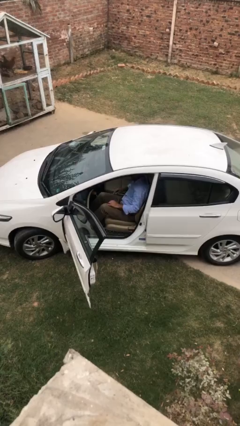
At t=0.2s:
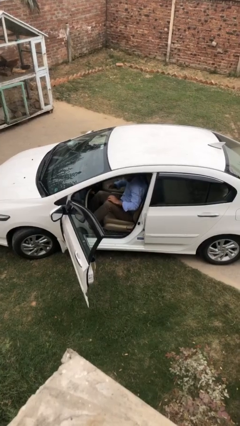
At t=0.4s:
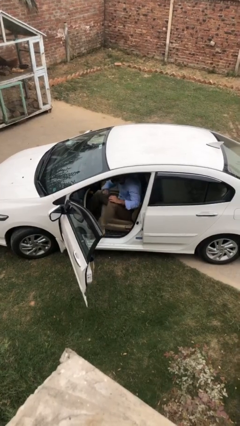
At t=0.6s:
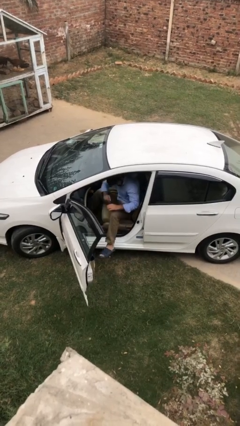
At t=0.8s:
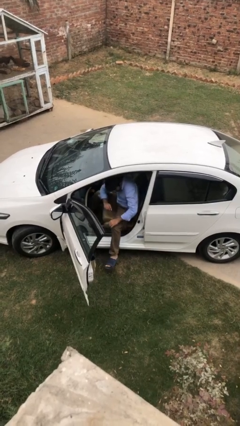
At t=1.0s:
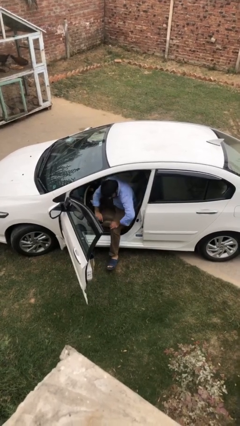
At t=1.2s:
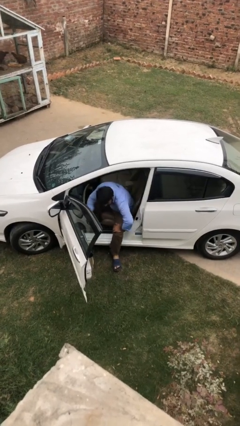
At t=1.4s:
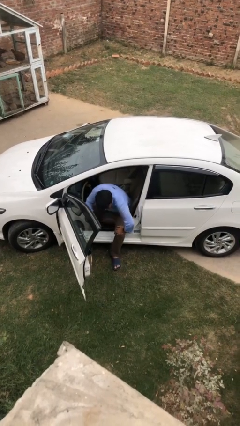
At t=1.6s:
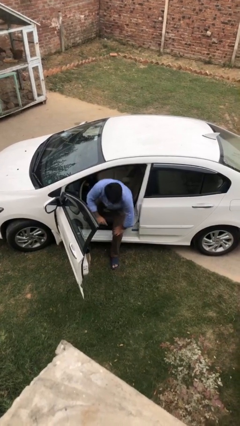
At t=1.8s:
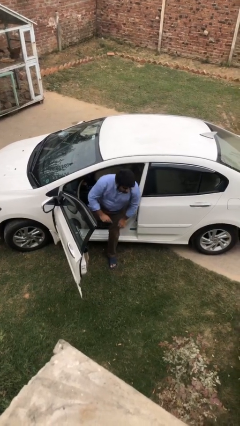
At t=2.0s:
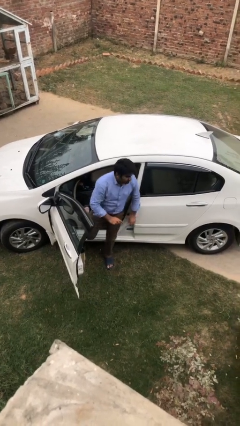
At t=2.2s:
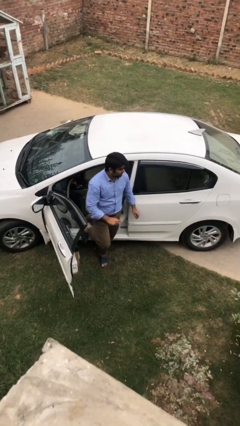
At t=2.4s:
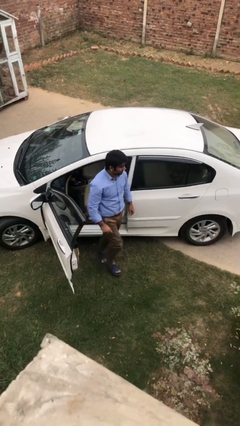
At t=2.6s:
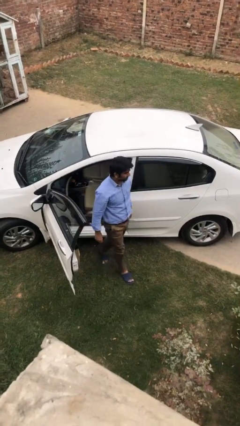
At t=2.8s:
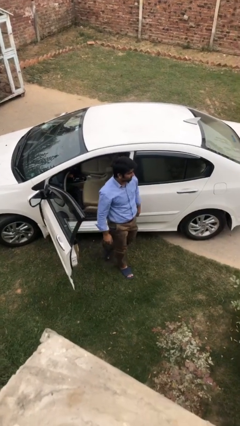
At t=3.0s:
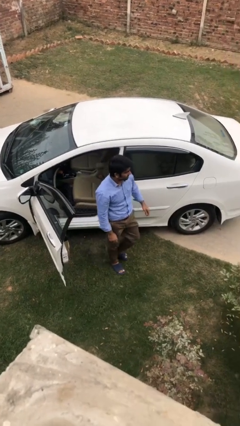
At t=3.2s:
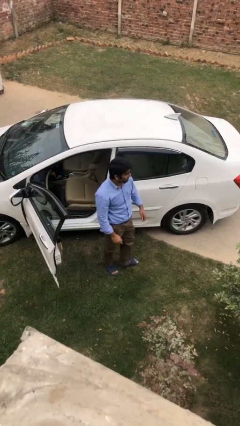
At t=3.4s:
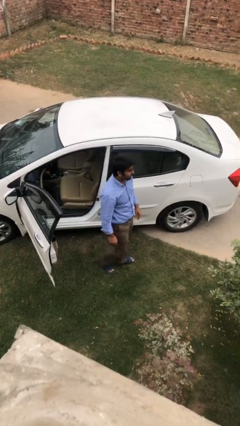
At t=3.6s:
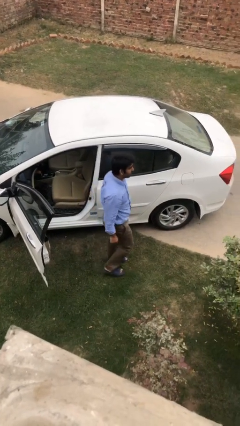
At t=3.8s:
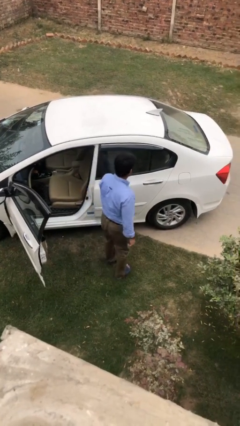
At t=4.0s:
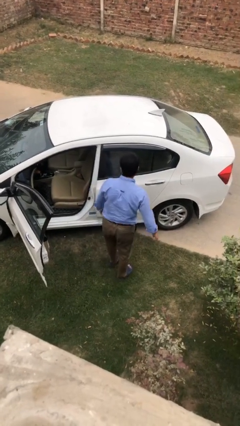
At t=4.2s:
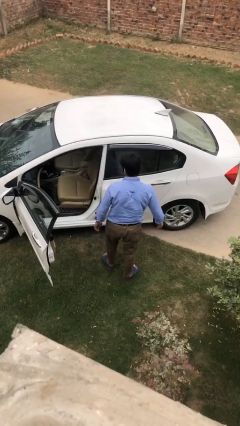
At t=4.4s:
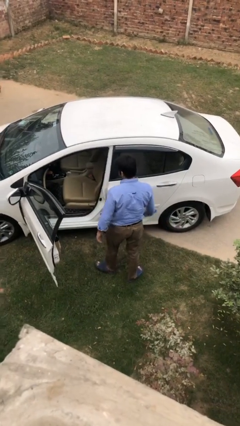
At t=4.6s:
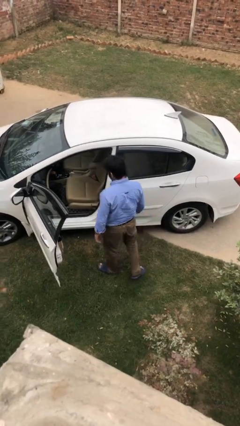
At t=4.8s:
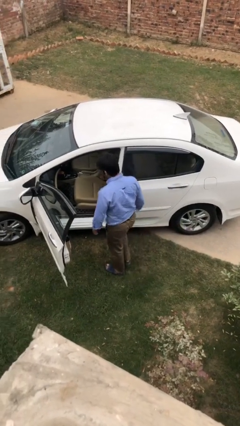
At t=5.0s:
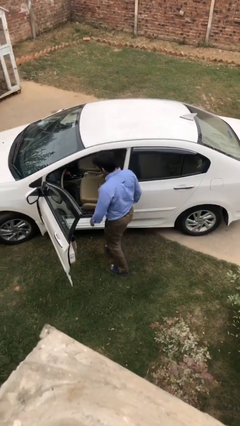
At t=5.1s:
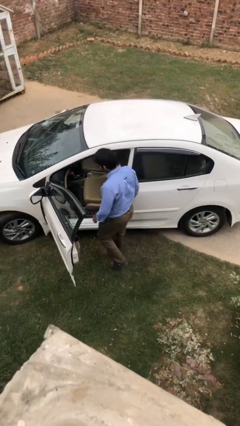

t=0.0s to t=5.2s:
person exits car

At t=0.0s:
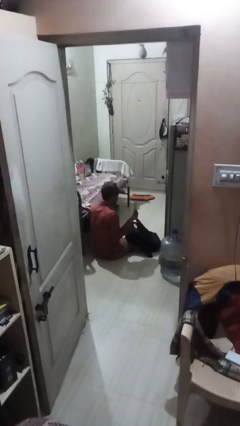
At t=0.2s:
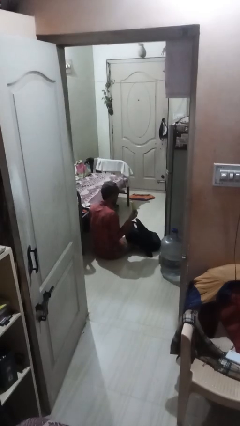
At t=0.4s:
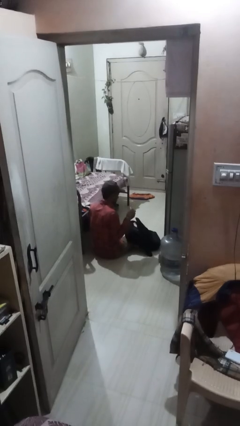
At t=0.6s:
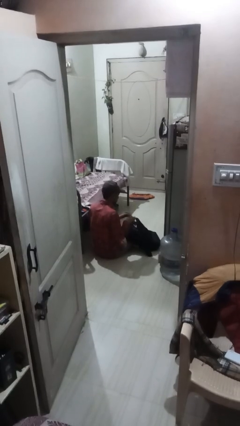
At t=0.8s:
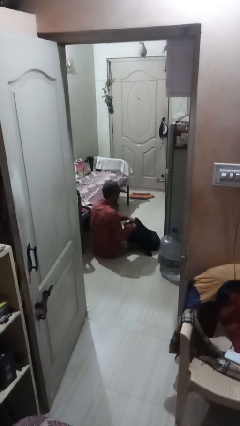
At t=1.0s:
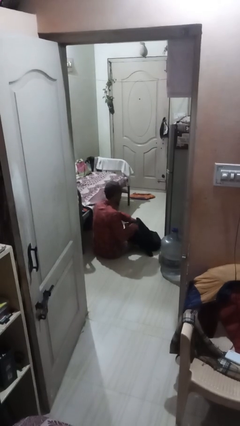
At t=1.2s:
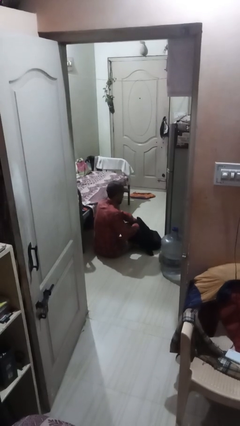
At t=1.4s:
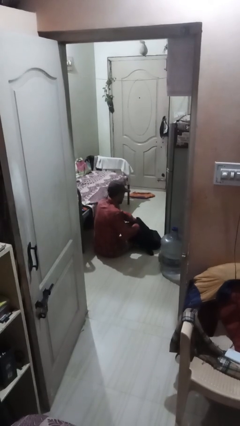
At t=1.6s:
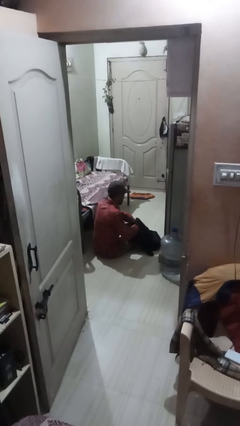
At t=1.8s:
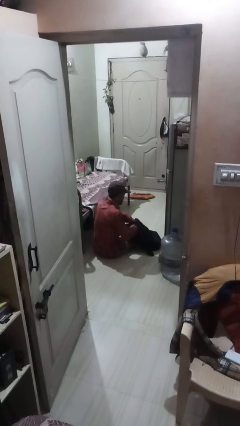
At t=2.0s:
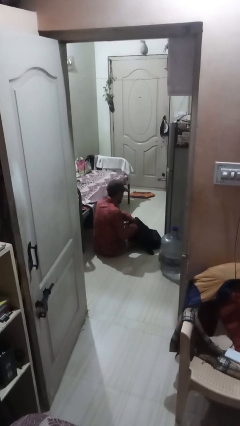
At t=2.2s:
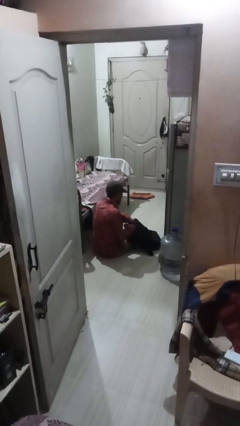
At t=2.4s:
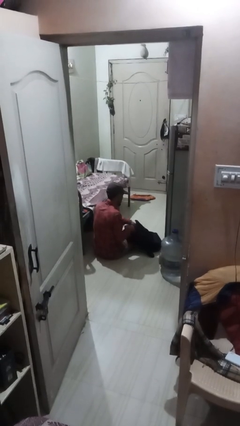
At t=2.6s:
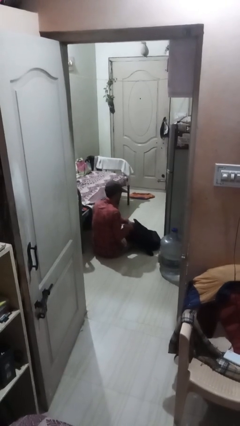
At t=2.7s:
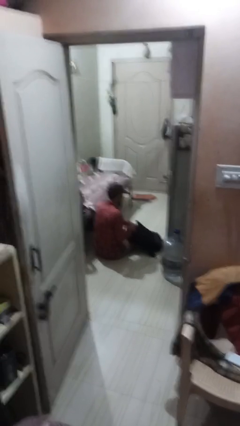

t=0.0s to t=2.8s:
person puts object into backpack

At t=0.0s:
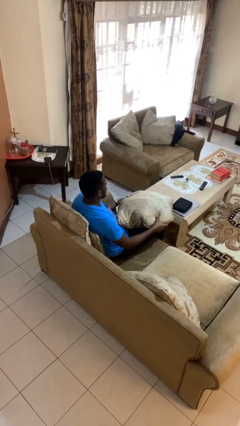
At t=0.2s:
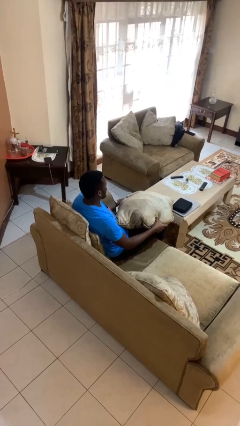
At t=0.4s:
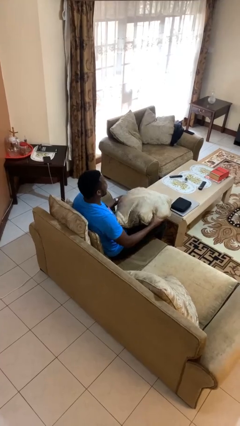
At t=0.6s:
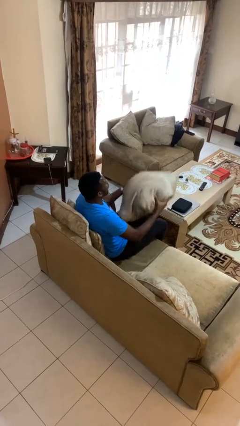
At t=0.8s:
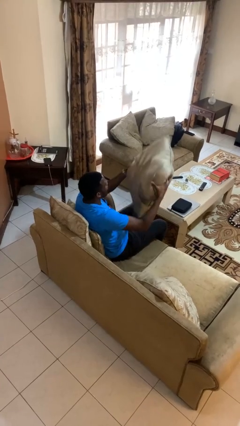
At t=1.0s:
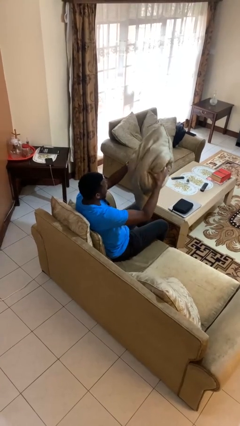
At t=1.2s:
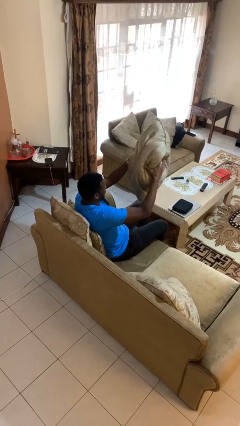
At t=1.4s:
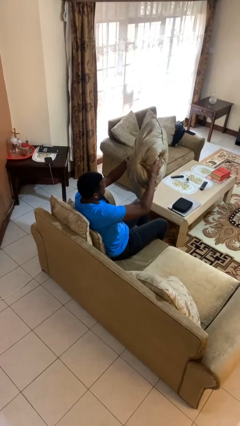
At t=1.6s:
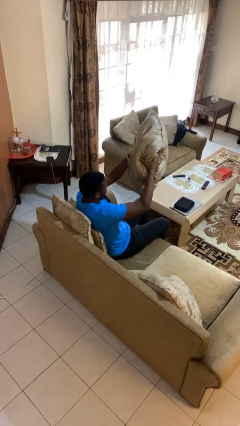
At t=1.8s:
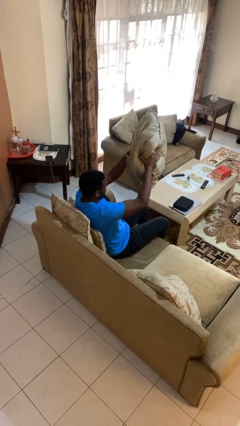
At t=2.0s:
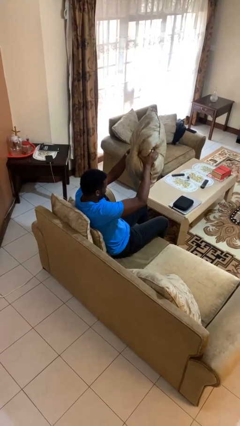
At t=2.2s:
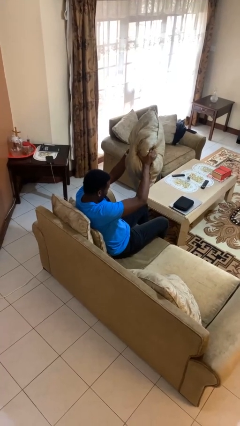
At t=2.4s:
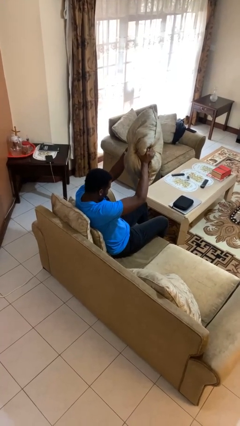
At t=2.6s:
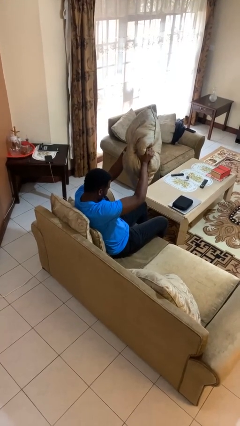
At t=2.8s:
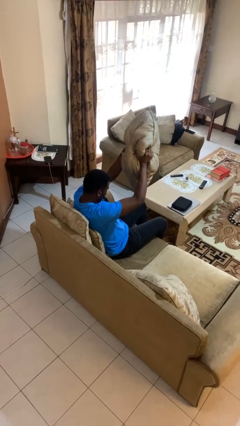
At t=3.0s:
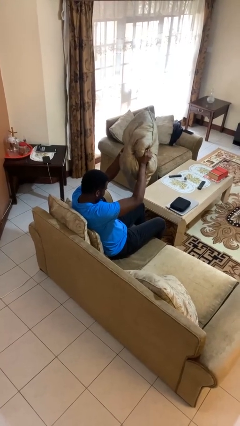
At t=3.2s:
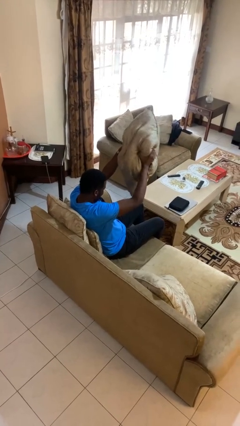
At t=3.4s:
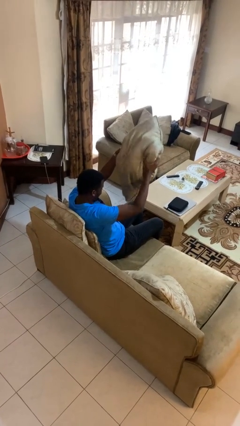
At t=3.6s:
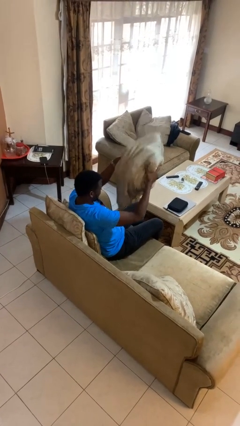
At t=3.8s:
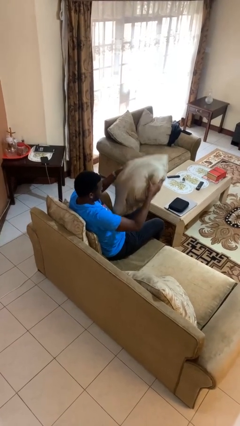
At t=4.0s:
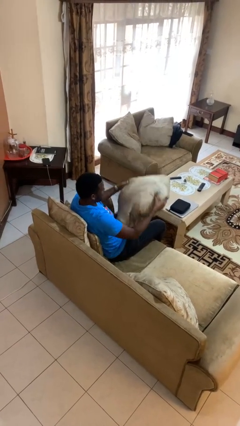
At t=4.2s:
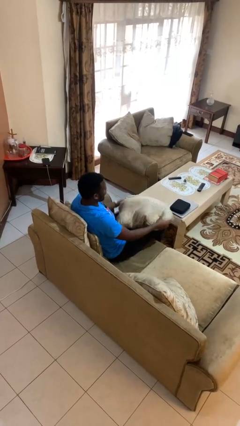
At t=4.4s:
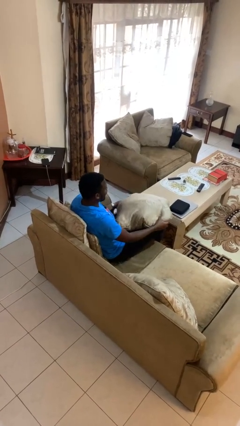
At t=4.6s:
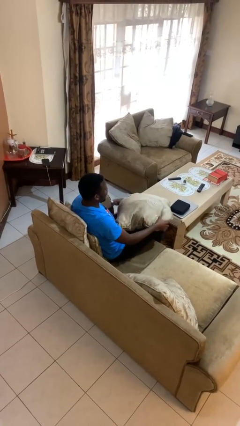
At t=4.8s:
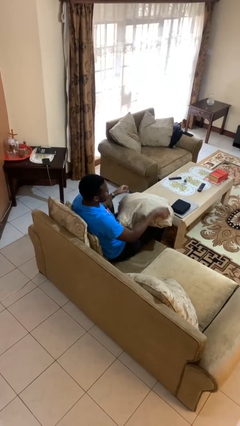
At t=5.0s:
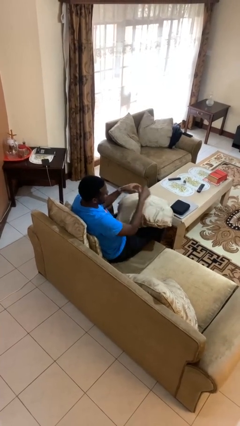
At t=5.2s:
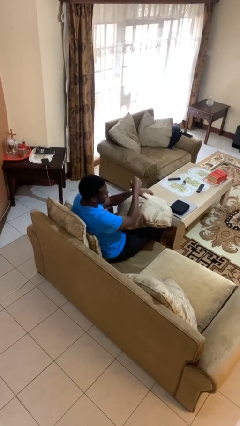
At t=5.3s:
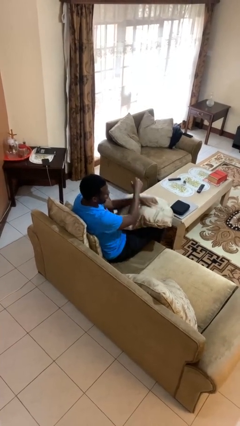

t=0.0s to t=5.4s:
person squeezes object

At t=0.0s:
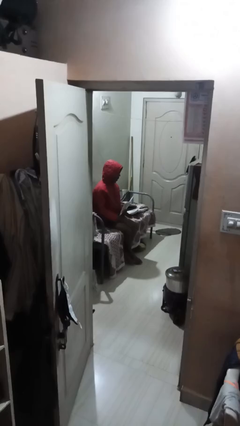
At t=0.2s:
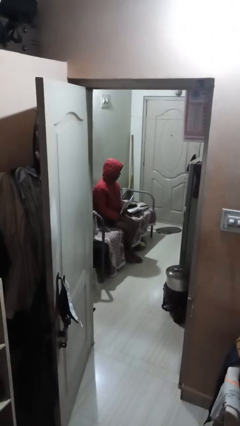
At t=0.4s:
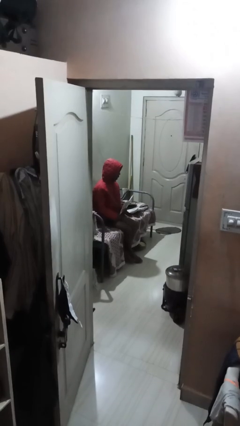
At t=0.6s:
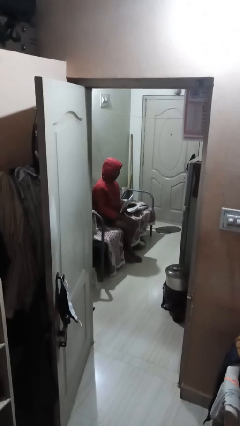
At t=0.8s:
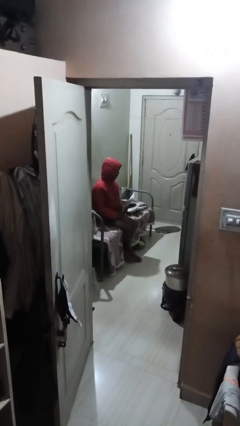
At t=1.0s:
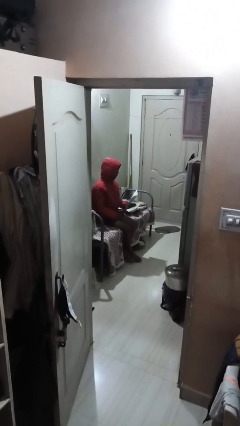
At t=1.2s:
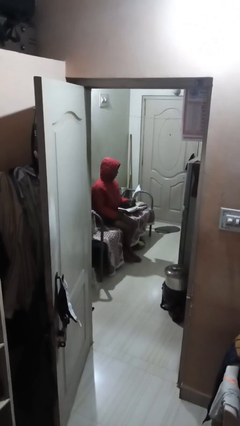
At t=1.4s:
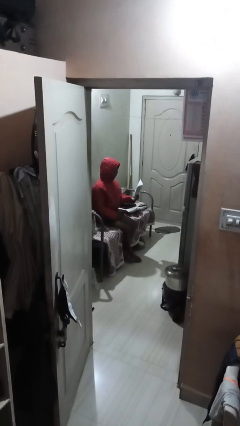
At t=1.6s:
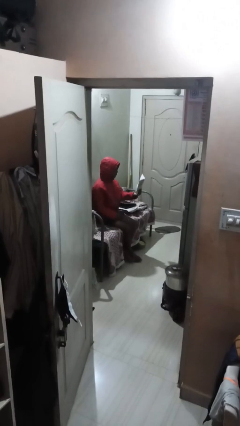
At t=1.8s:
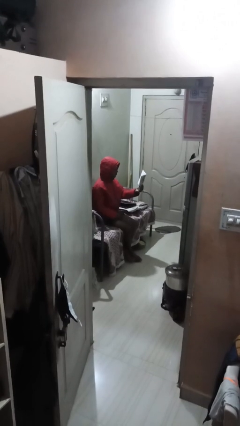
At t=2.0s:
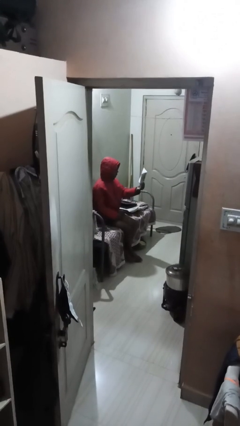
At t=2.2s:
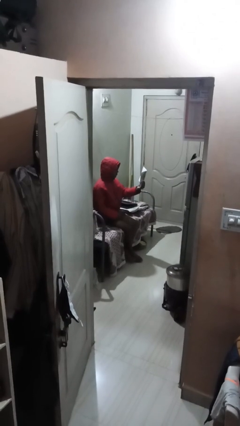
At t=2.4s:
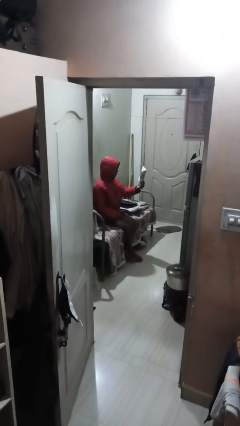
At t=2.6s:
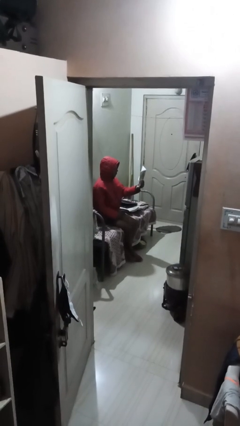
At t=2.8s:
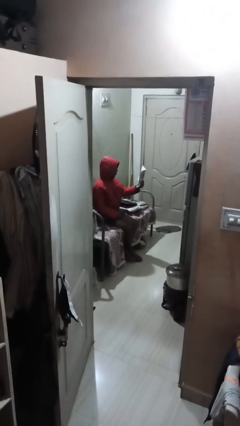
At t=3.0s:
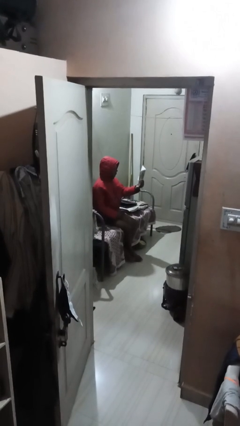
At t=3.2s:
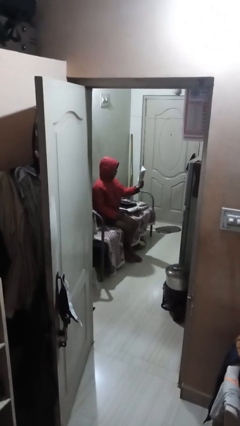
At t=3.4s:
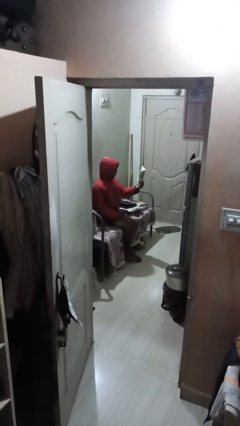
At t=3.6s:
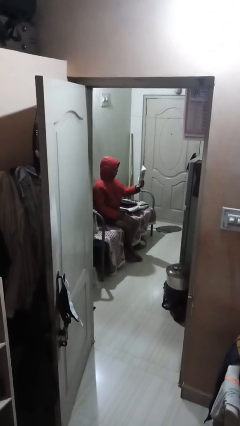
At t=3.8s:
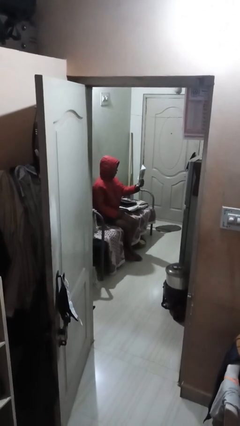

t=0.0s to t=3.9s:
person reads document

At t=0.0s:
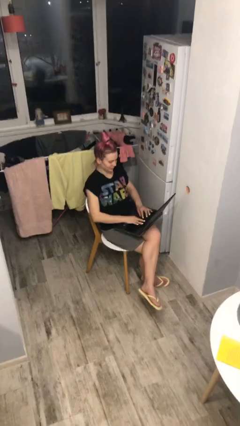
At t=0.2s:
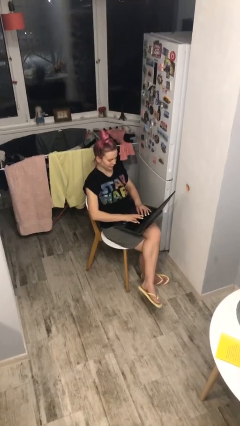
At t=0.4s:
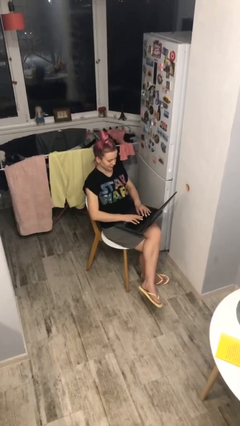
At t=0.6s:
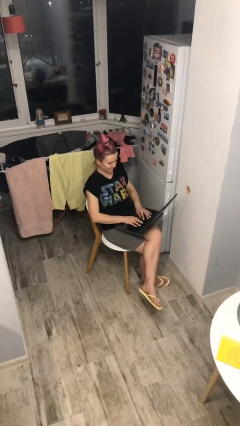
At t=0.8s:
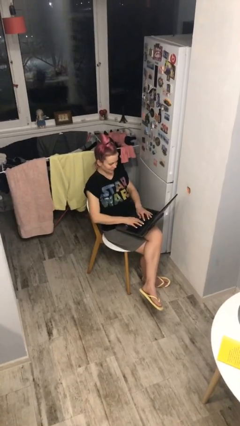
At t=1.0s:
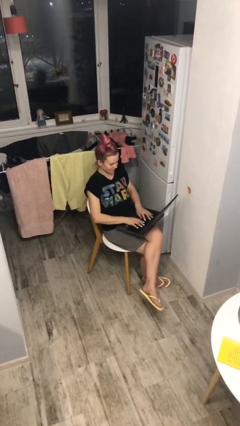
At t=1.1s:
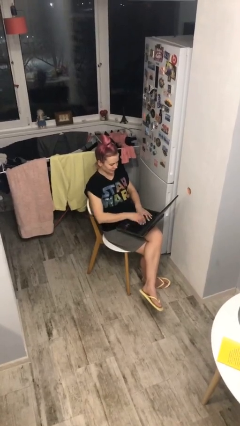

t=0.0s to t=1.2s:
person interacts with laptop
